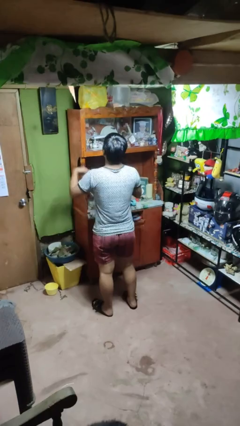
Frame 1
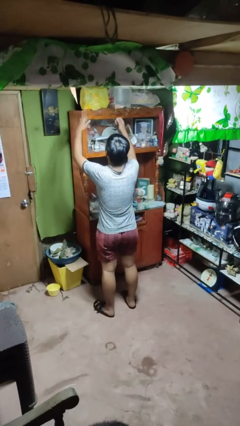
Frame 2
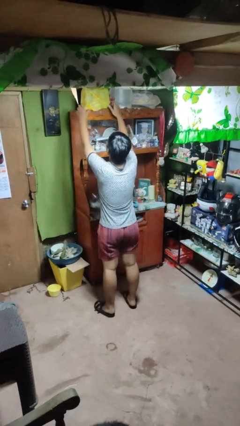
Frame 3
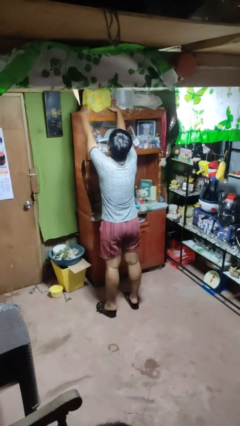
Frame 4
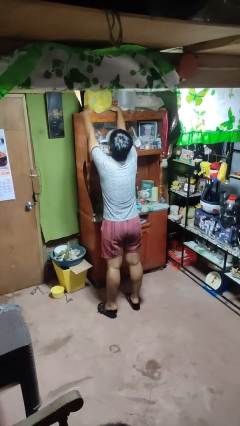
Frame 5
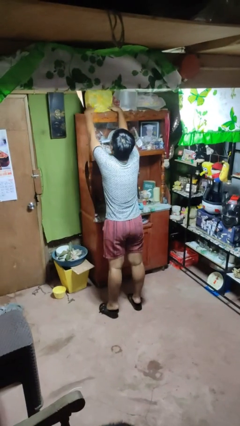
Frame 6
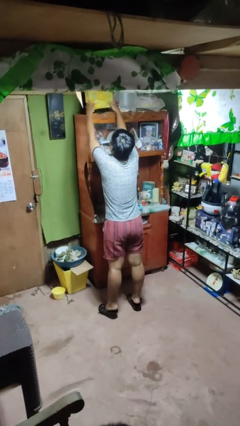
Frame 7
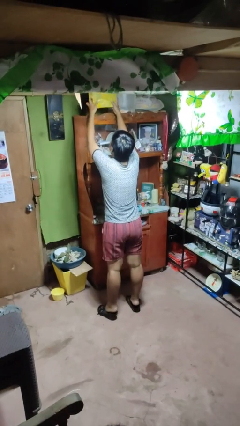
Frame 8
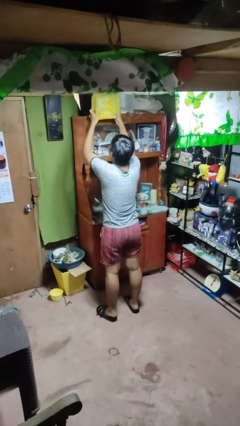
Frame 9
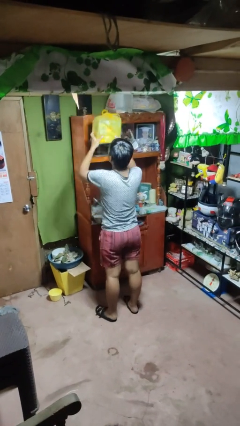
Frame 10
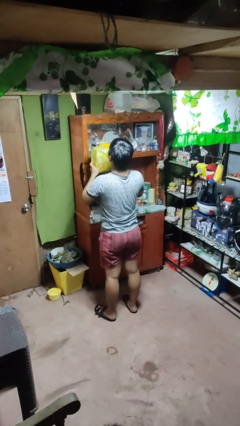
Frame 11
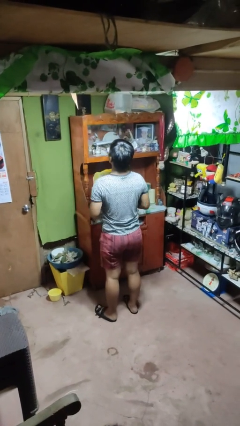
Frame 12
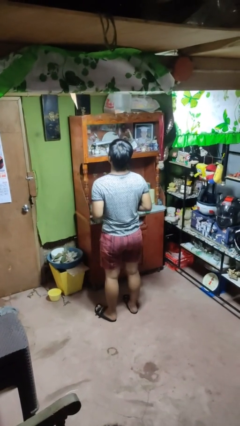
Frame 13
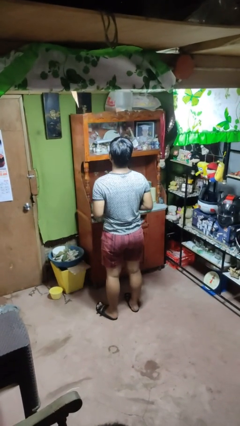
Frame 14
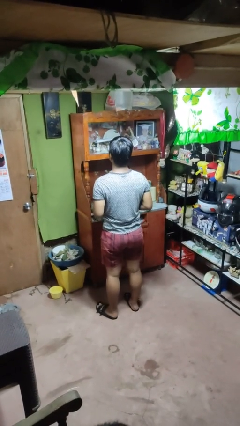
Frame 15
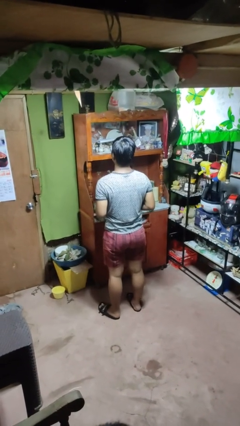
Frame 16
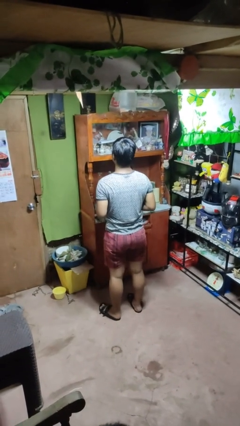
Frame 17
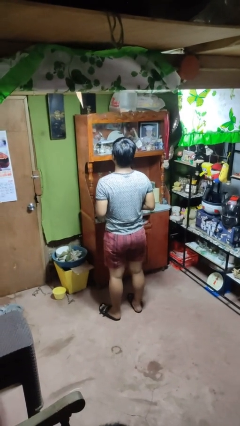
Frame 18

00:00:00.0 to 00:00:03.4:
person picks up object from shelf

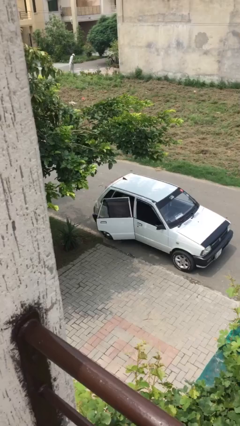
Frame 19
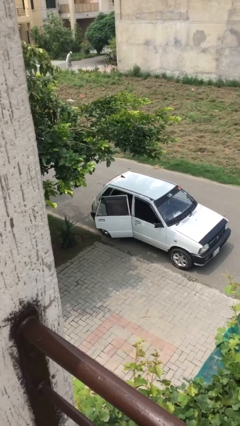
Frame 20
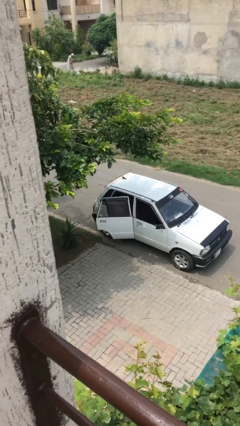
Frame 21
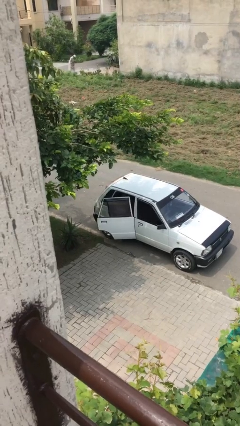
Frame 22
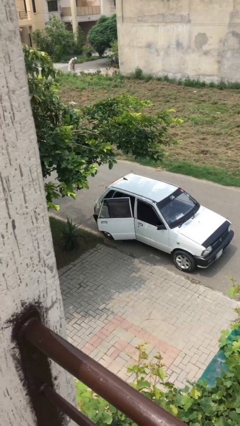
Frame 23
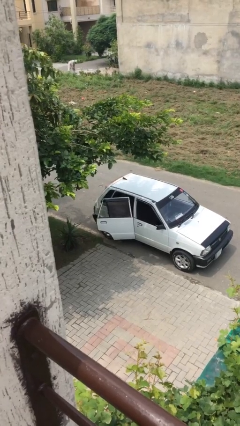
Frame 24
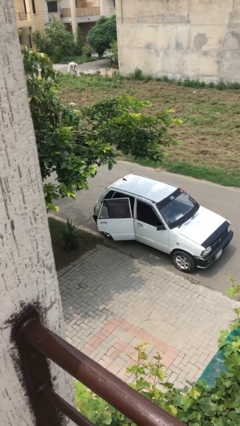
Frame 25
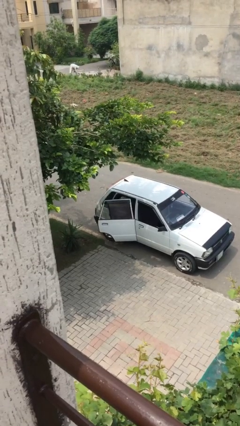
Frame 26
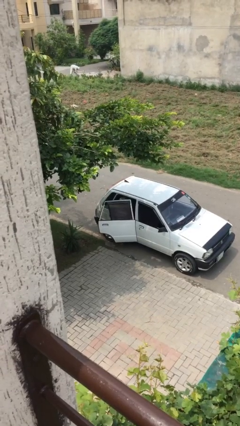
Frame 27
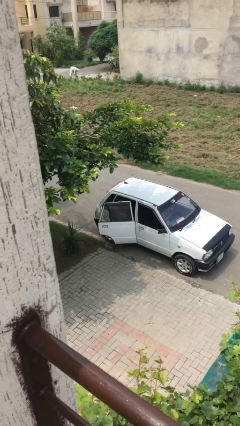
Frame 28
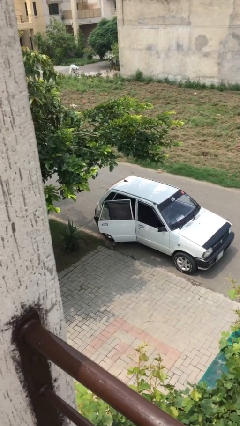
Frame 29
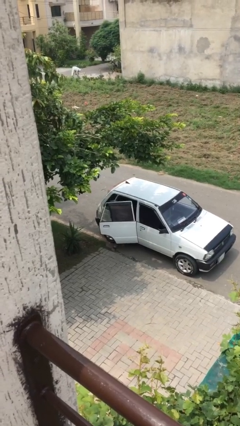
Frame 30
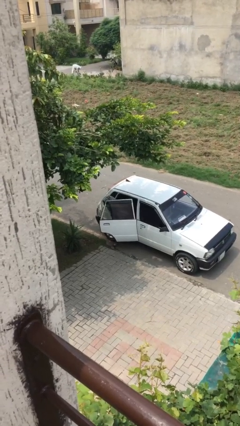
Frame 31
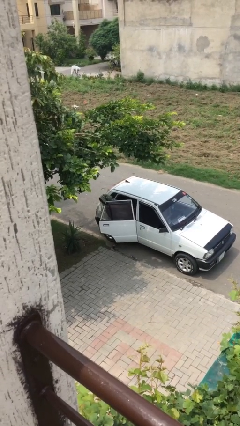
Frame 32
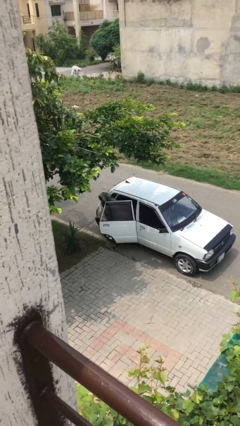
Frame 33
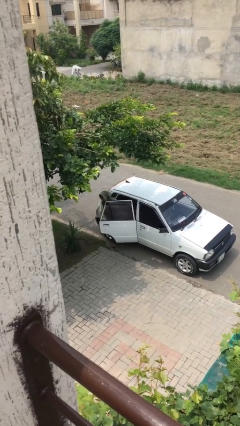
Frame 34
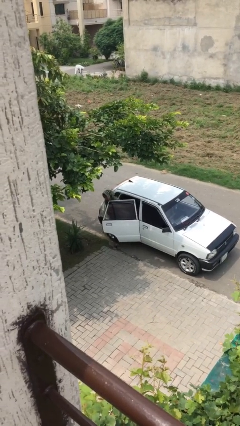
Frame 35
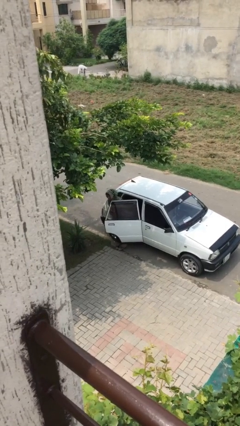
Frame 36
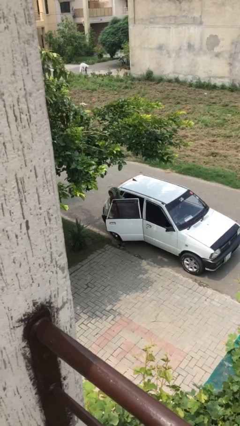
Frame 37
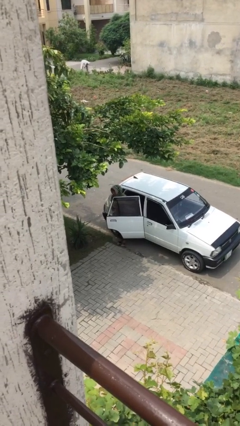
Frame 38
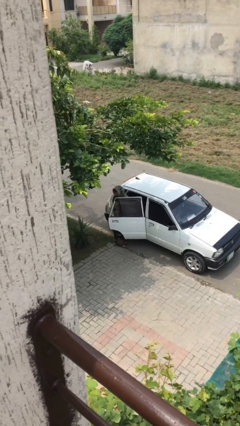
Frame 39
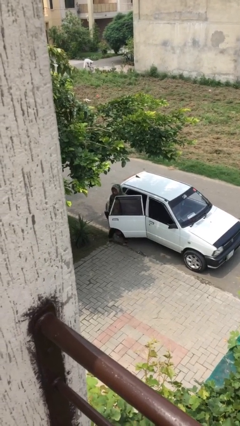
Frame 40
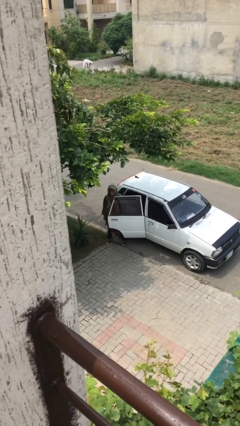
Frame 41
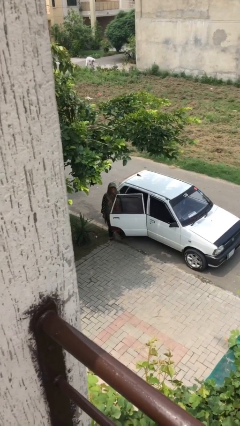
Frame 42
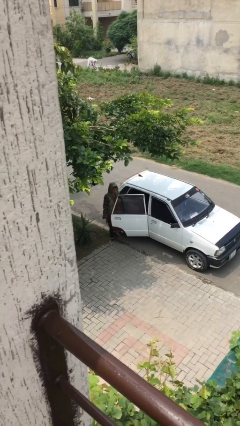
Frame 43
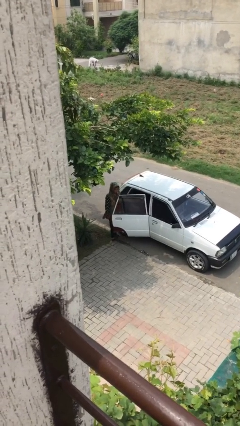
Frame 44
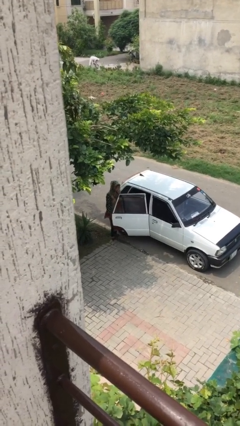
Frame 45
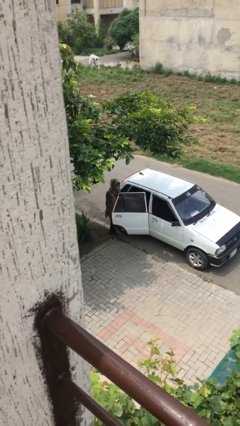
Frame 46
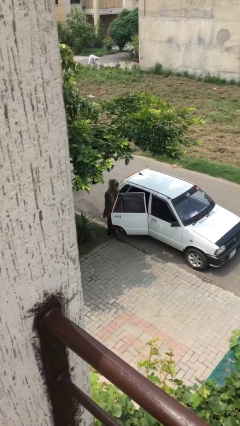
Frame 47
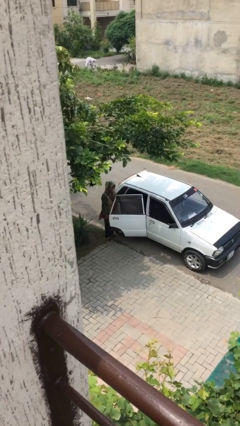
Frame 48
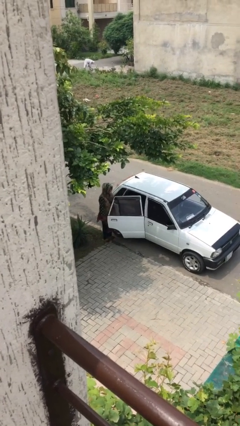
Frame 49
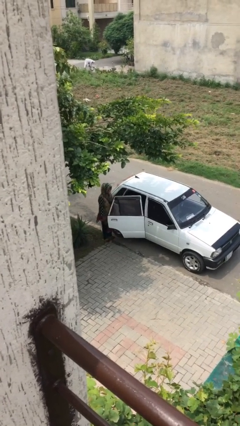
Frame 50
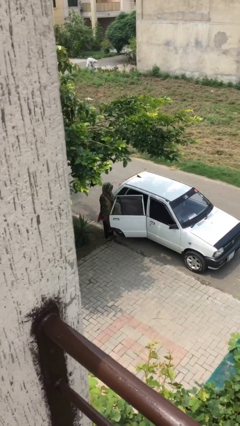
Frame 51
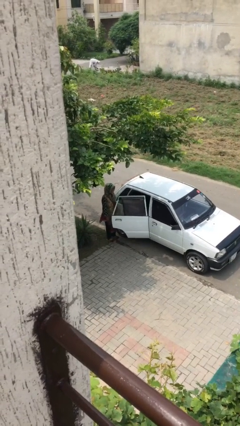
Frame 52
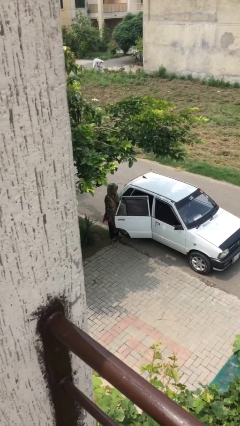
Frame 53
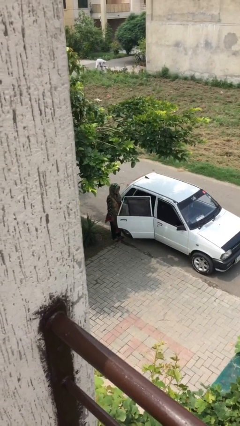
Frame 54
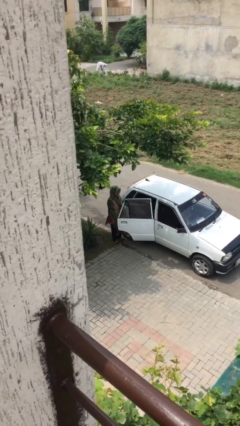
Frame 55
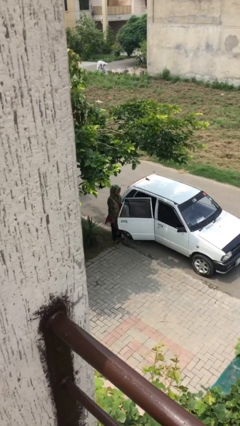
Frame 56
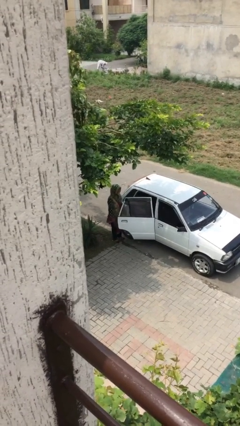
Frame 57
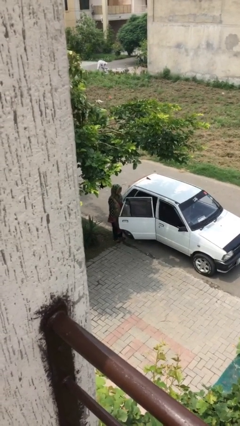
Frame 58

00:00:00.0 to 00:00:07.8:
person exits car

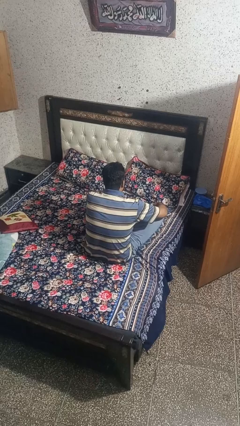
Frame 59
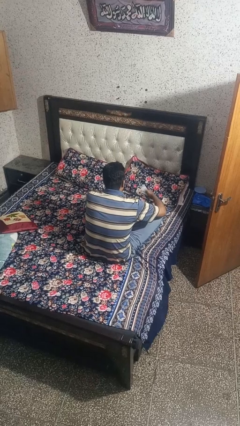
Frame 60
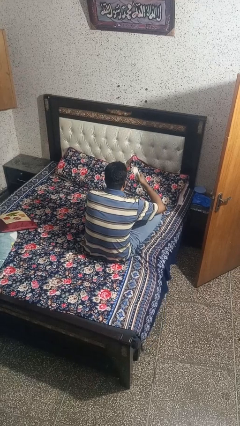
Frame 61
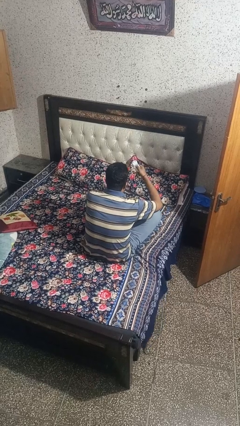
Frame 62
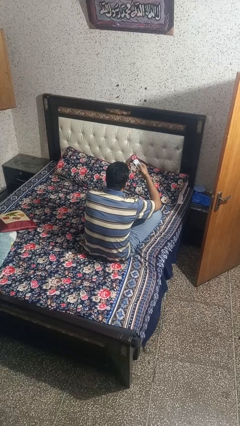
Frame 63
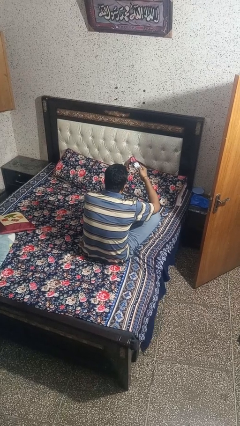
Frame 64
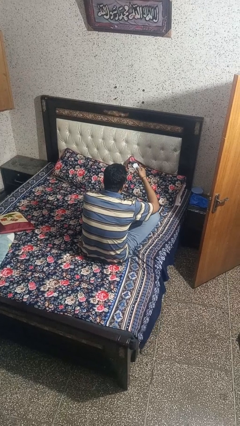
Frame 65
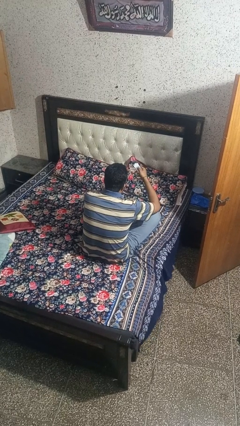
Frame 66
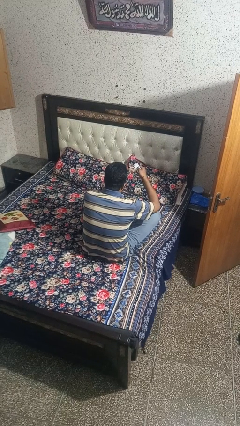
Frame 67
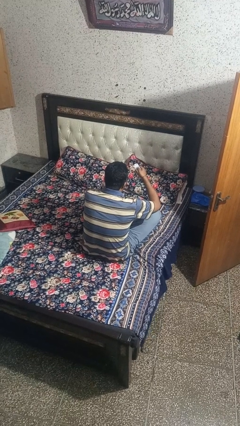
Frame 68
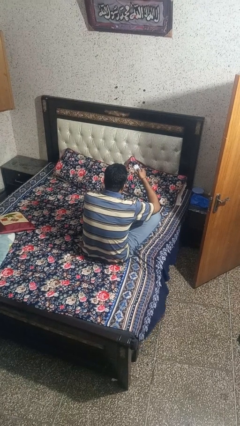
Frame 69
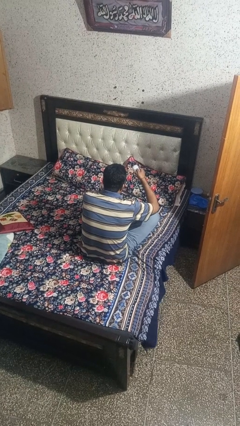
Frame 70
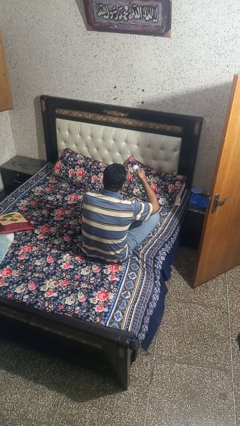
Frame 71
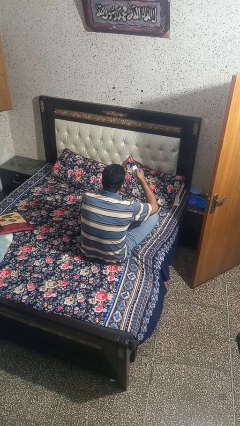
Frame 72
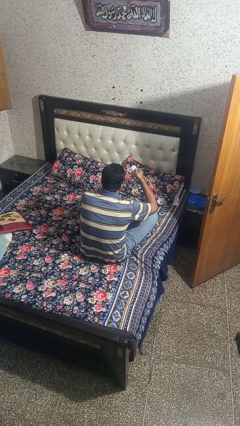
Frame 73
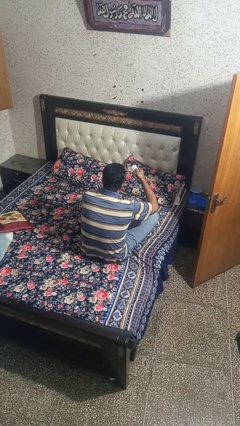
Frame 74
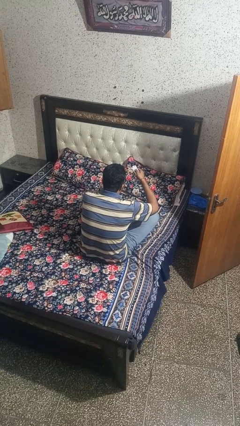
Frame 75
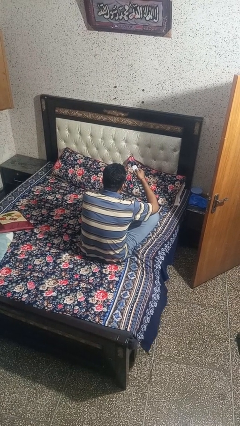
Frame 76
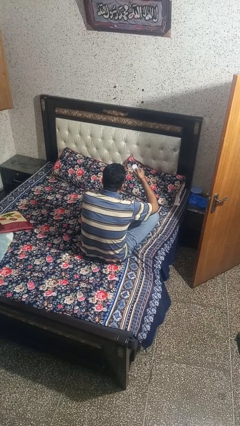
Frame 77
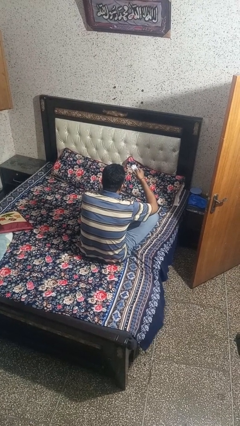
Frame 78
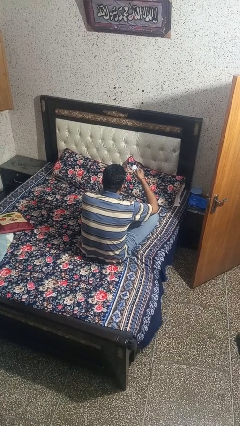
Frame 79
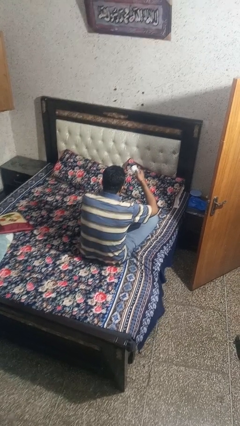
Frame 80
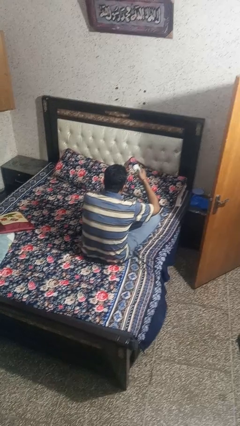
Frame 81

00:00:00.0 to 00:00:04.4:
person uses television remote

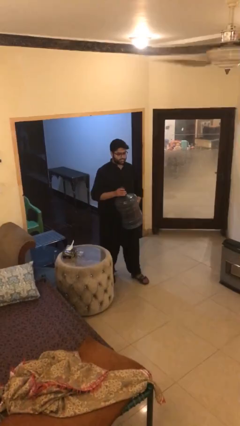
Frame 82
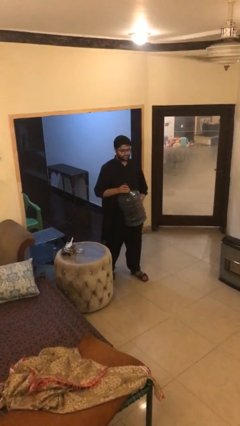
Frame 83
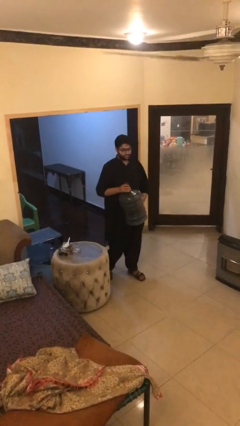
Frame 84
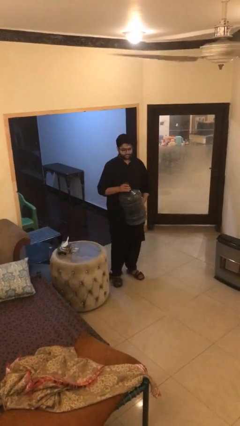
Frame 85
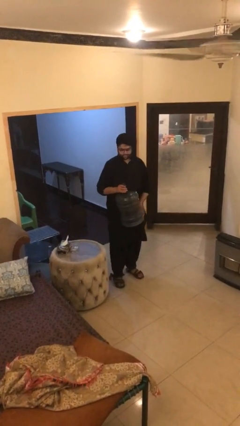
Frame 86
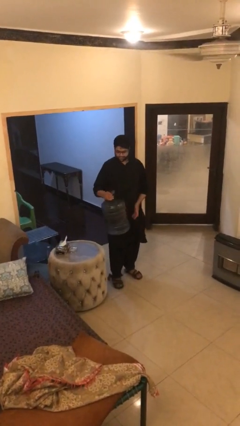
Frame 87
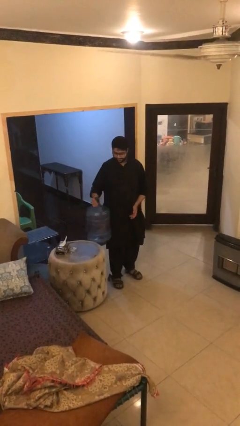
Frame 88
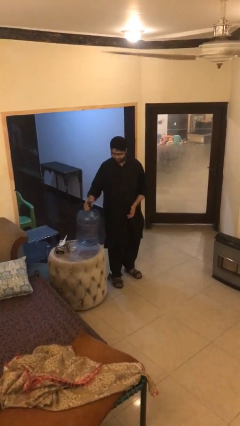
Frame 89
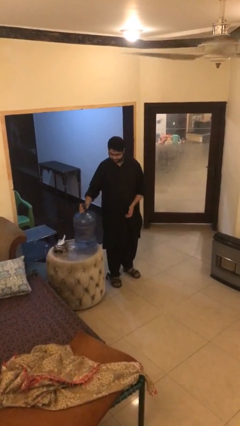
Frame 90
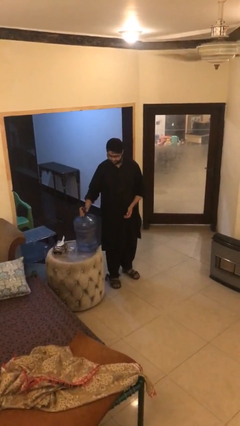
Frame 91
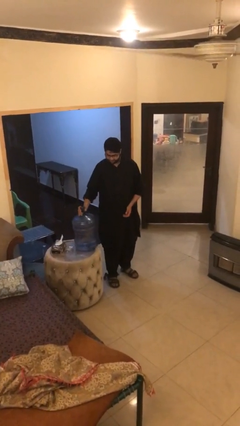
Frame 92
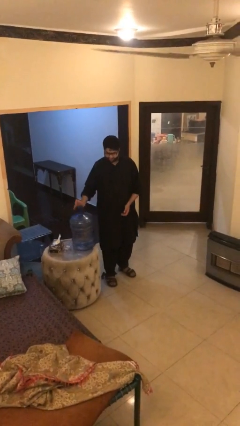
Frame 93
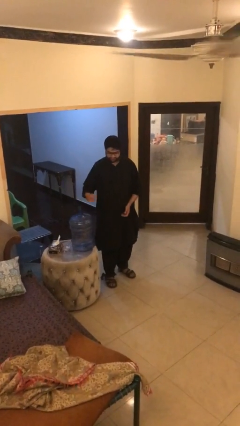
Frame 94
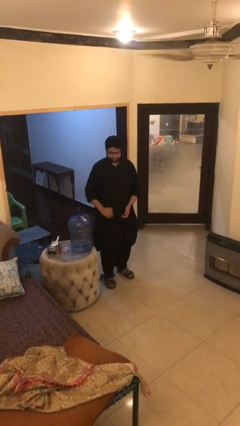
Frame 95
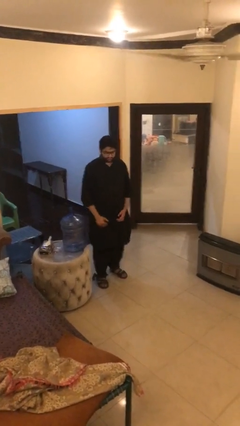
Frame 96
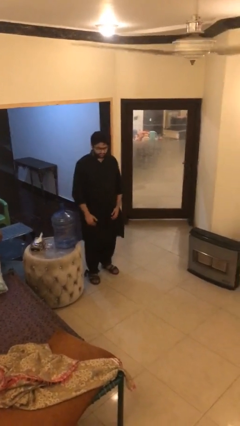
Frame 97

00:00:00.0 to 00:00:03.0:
person puts down object on table
